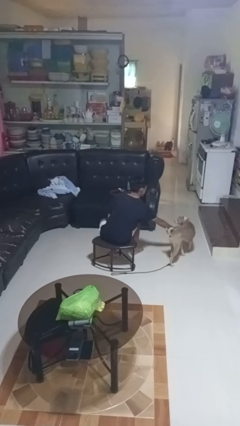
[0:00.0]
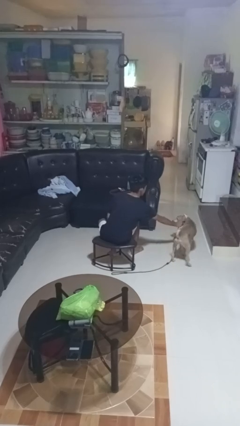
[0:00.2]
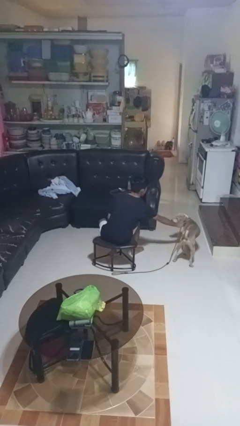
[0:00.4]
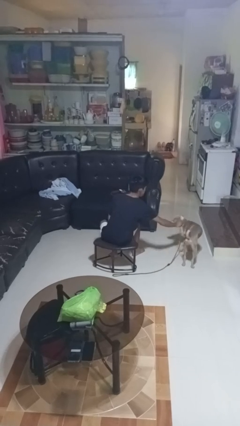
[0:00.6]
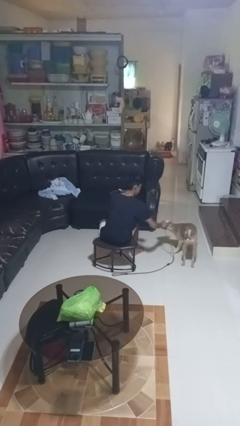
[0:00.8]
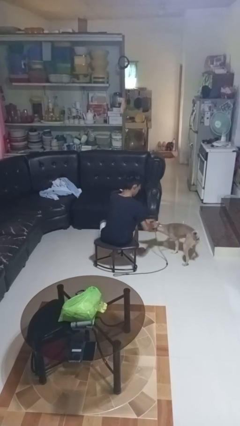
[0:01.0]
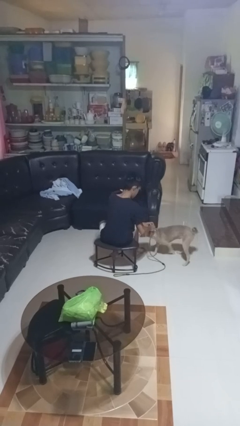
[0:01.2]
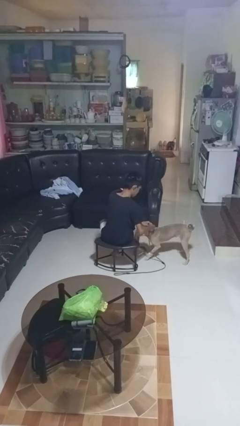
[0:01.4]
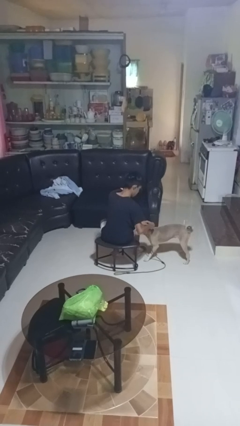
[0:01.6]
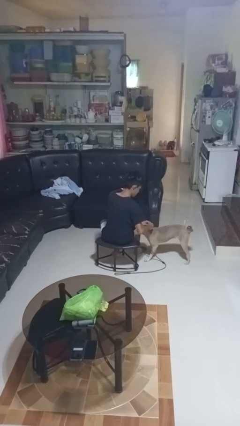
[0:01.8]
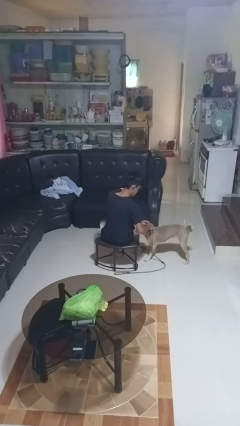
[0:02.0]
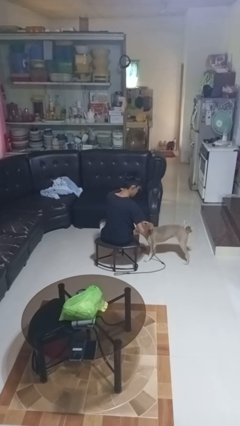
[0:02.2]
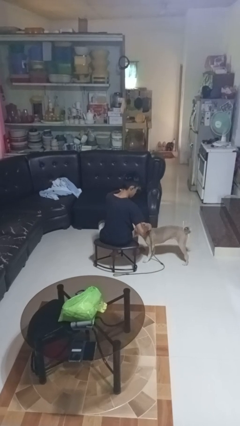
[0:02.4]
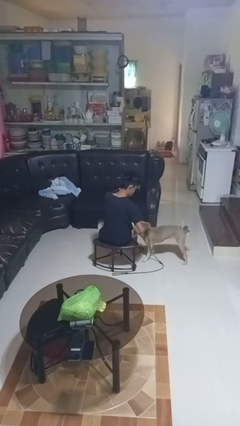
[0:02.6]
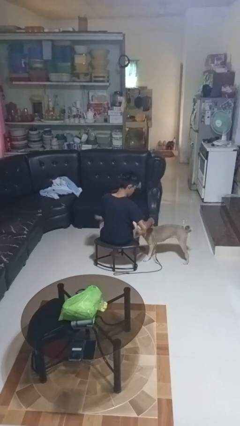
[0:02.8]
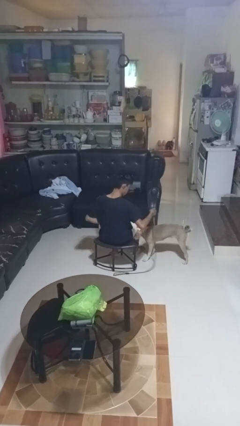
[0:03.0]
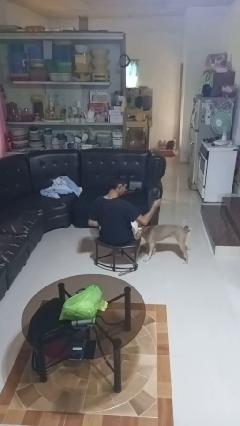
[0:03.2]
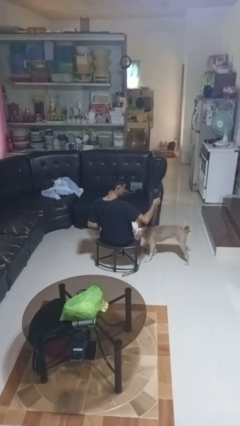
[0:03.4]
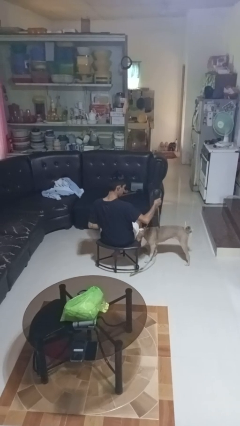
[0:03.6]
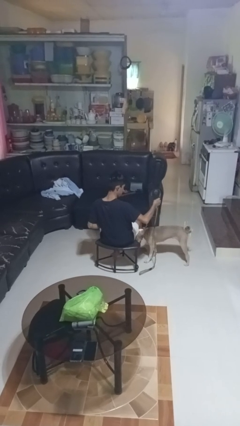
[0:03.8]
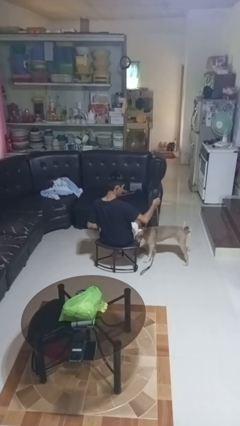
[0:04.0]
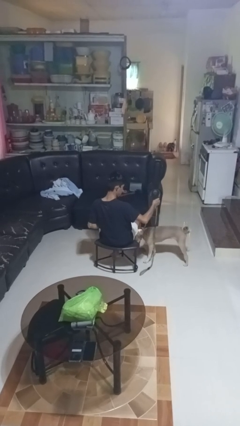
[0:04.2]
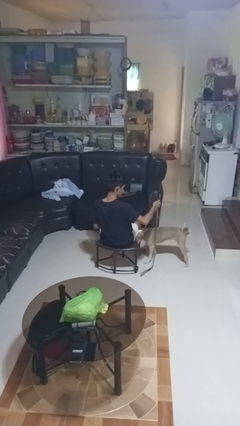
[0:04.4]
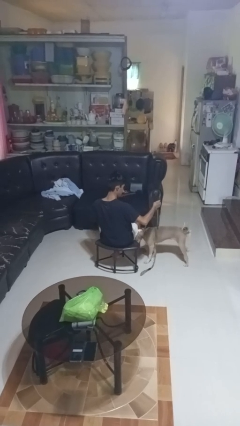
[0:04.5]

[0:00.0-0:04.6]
person attaches leash to dog

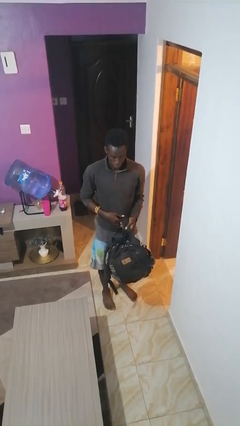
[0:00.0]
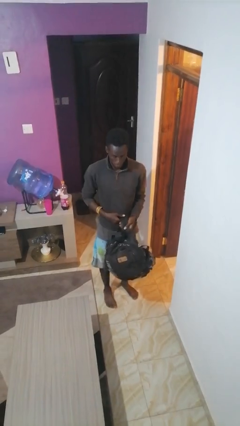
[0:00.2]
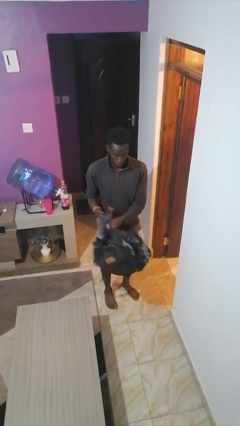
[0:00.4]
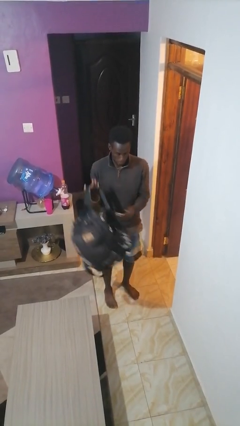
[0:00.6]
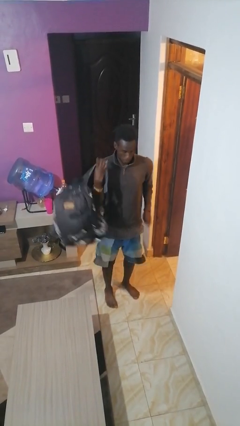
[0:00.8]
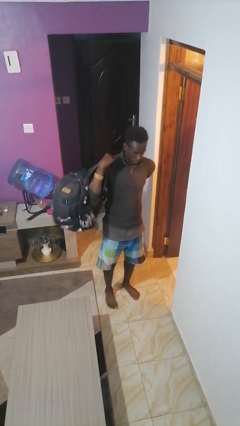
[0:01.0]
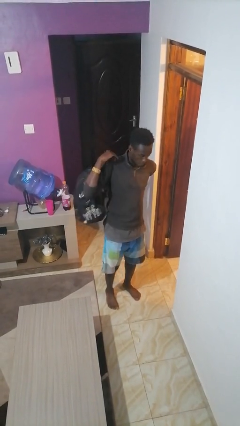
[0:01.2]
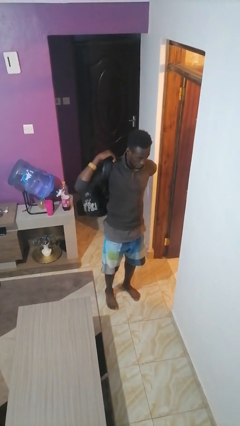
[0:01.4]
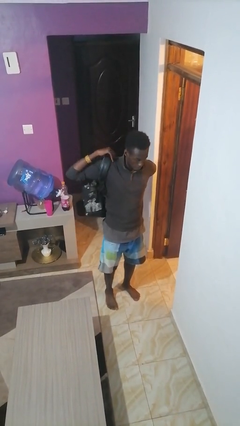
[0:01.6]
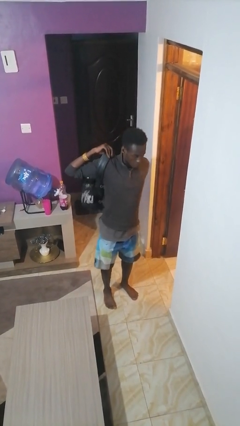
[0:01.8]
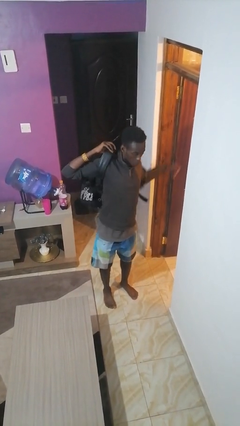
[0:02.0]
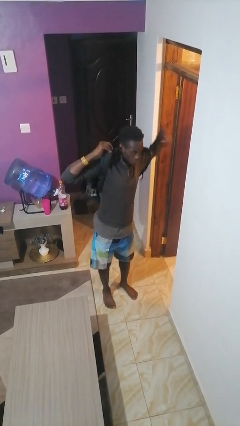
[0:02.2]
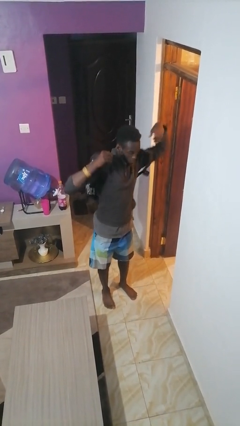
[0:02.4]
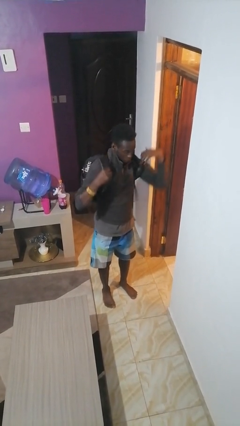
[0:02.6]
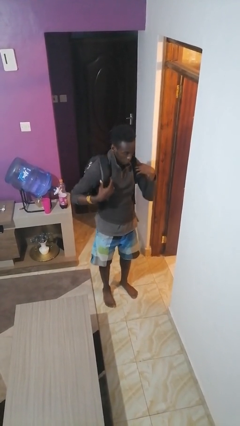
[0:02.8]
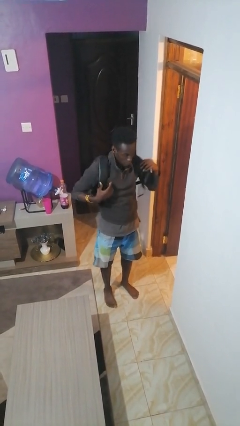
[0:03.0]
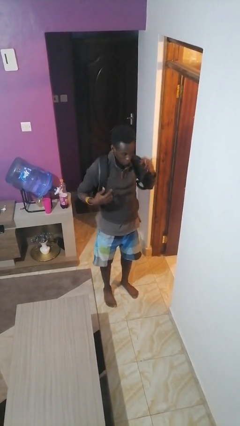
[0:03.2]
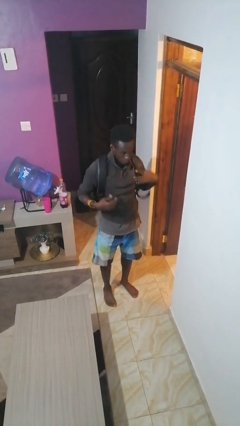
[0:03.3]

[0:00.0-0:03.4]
person puts on backpack

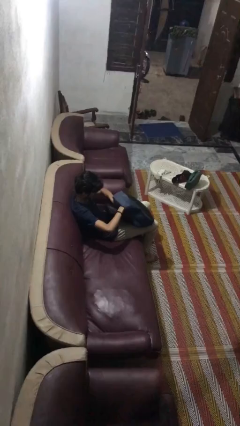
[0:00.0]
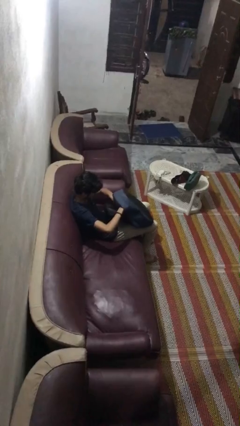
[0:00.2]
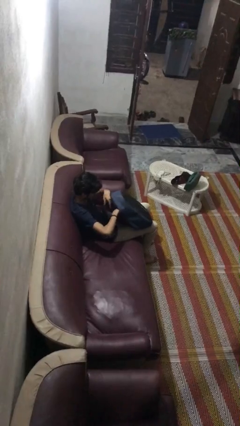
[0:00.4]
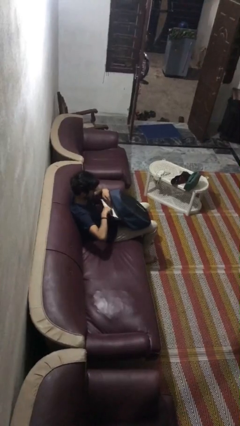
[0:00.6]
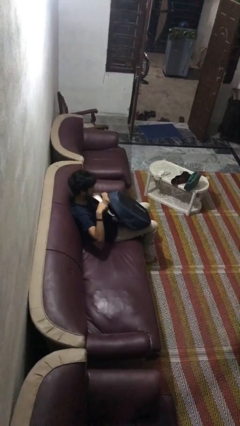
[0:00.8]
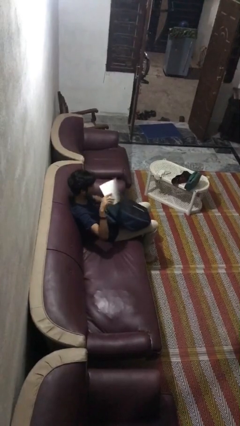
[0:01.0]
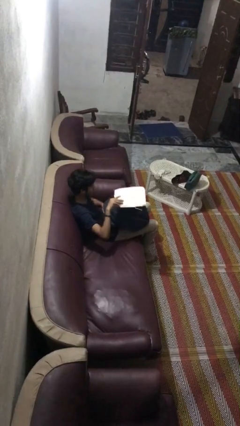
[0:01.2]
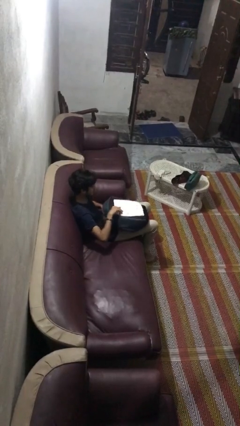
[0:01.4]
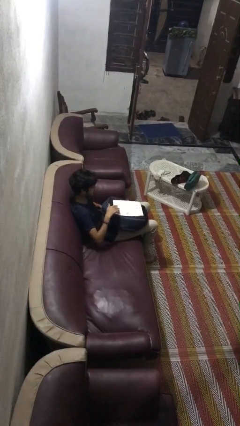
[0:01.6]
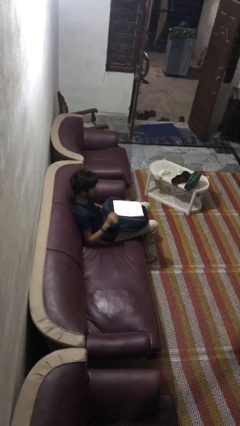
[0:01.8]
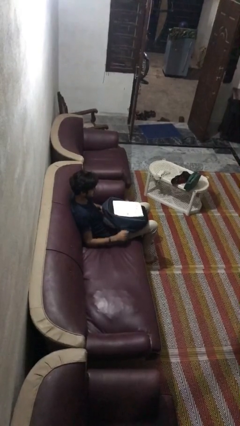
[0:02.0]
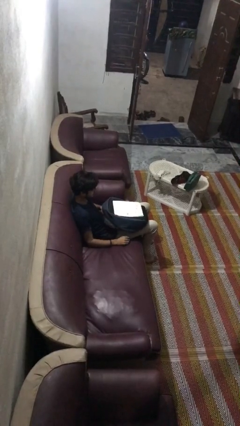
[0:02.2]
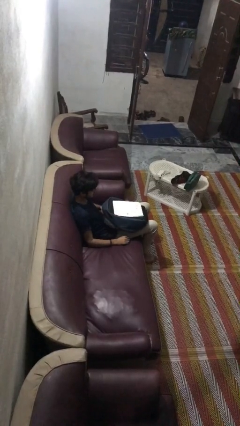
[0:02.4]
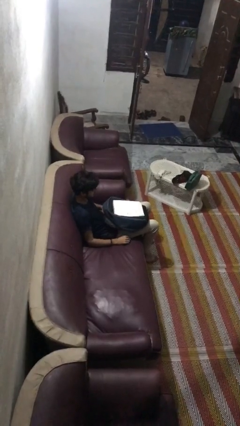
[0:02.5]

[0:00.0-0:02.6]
person takes object from backpack

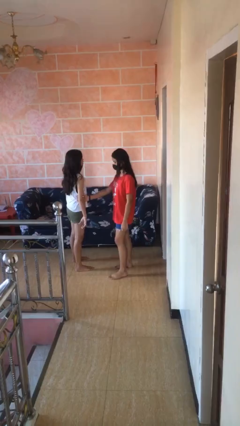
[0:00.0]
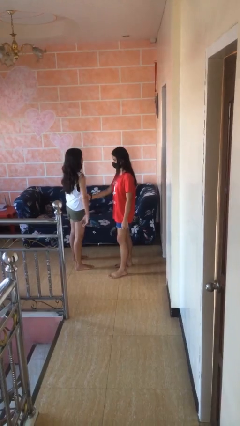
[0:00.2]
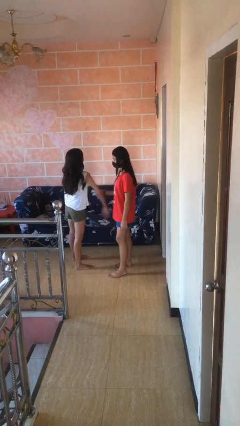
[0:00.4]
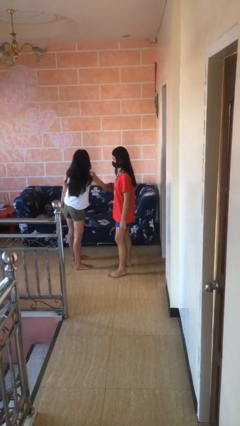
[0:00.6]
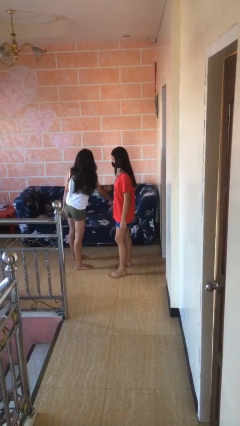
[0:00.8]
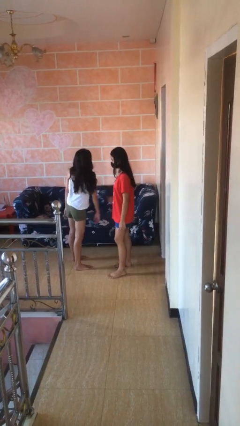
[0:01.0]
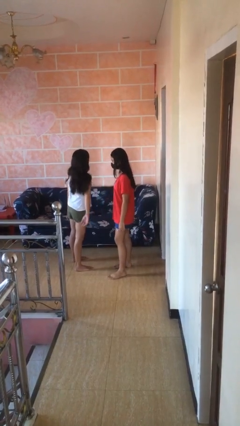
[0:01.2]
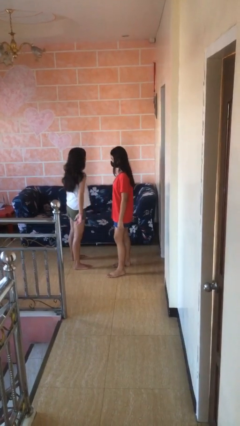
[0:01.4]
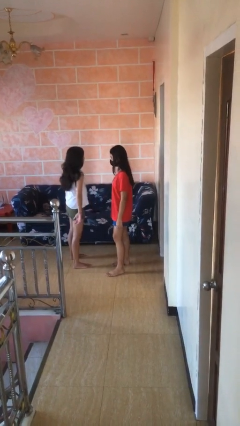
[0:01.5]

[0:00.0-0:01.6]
person grabs person by forearm

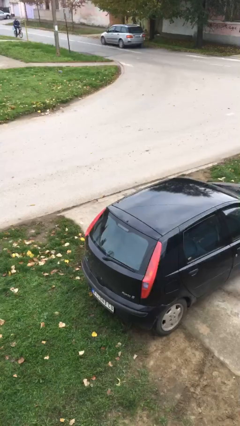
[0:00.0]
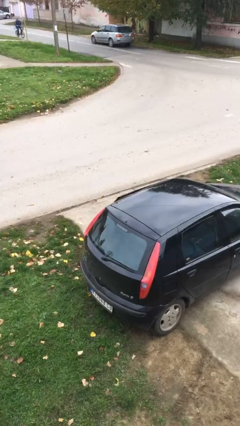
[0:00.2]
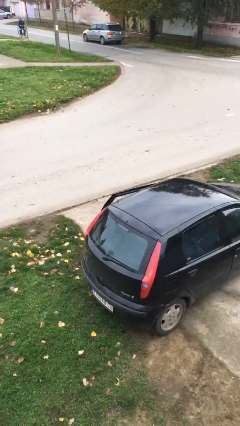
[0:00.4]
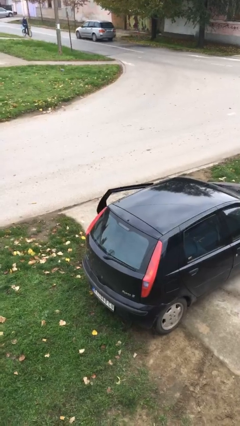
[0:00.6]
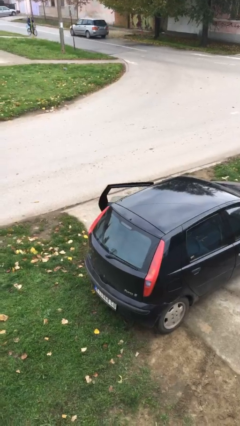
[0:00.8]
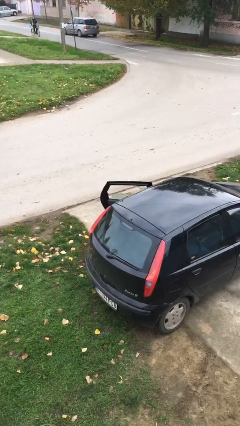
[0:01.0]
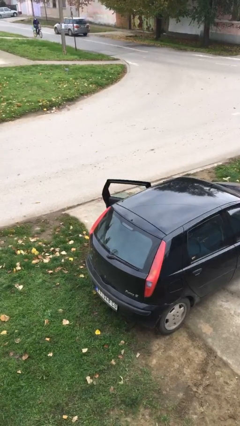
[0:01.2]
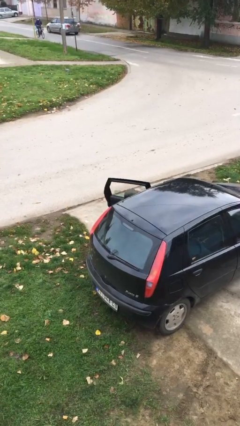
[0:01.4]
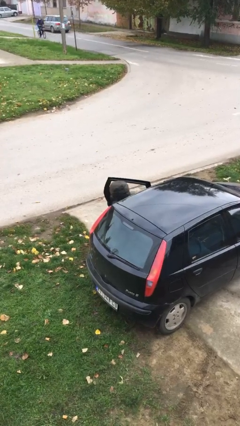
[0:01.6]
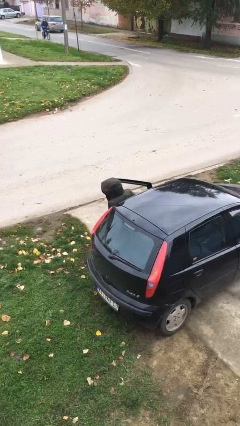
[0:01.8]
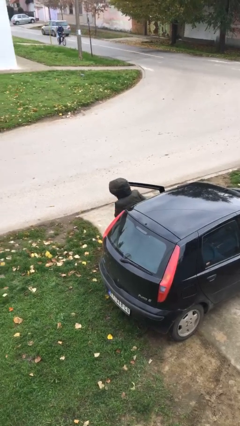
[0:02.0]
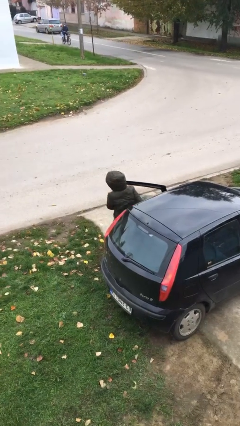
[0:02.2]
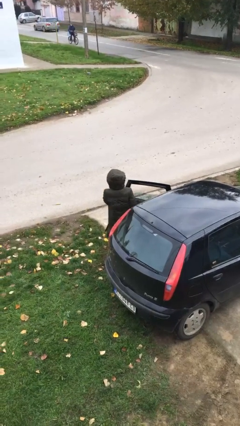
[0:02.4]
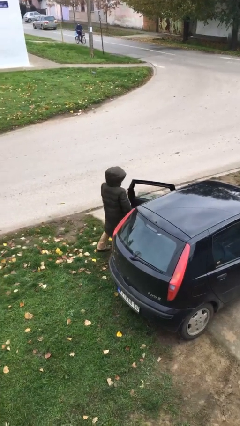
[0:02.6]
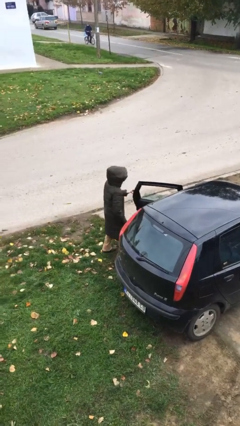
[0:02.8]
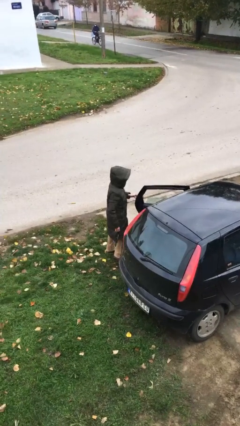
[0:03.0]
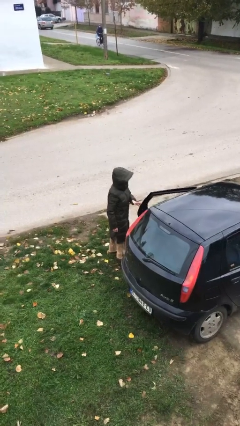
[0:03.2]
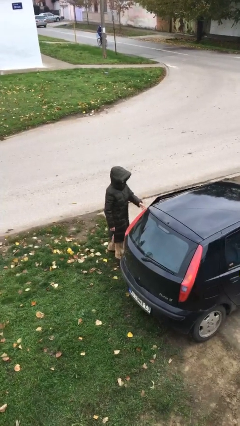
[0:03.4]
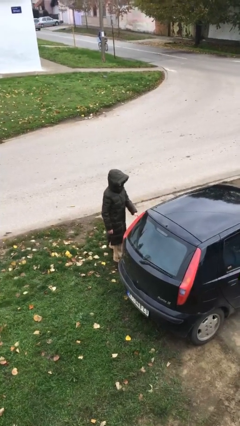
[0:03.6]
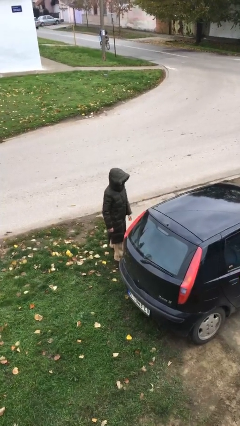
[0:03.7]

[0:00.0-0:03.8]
person exits car

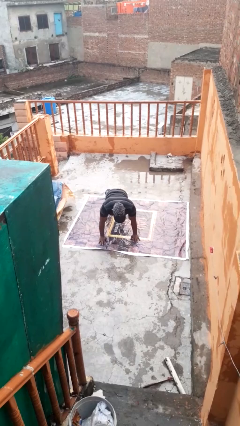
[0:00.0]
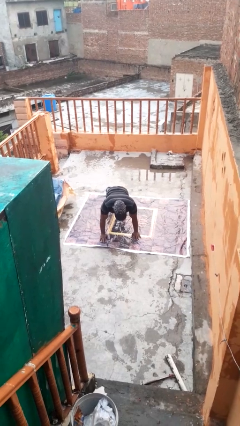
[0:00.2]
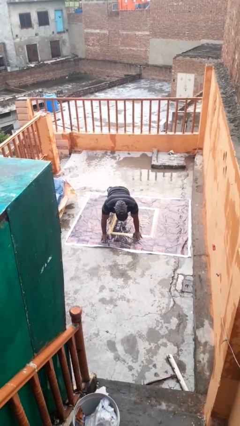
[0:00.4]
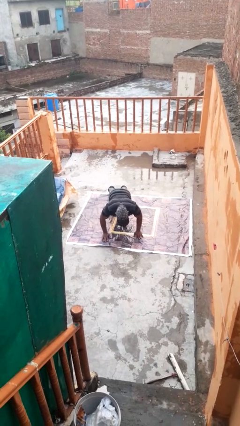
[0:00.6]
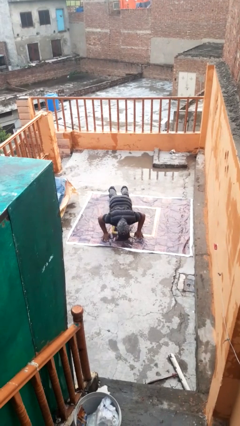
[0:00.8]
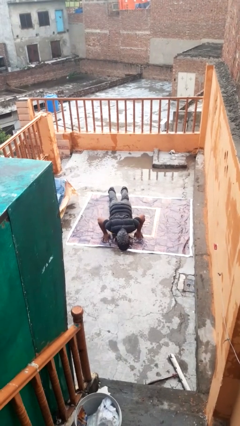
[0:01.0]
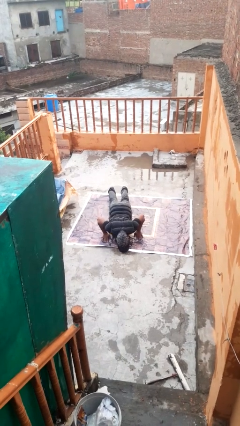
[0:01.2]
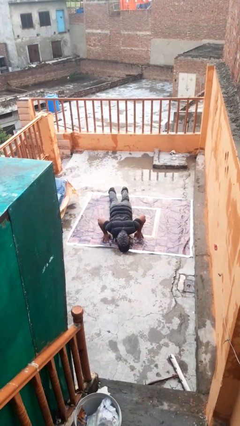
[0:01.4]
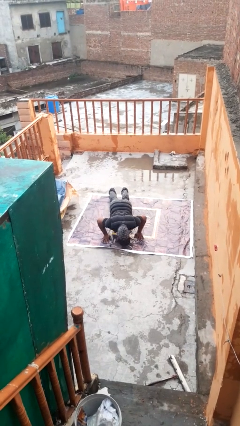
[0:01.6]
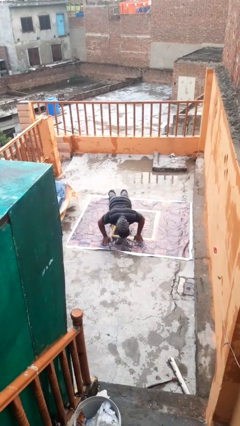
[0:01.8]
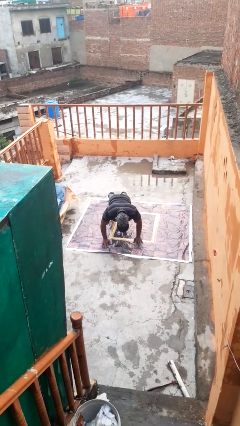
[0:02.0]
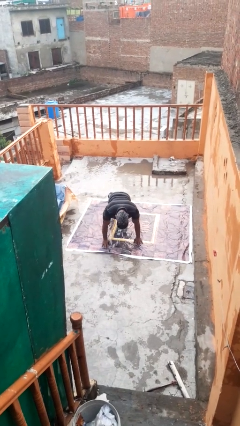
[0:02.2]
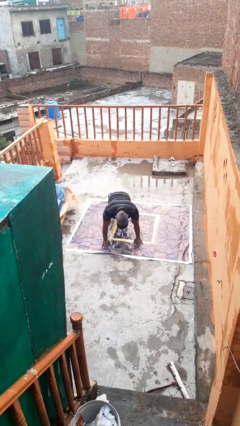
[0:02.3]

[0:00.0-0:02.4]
person exercises with pushup
